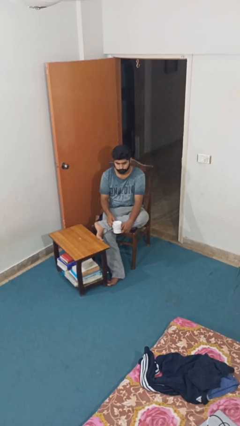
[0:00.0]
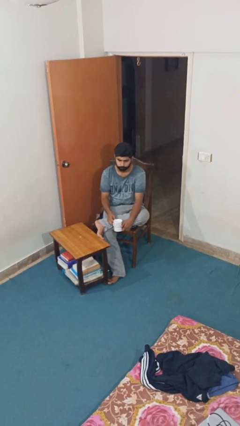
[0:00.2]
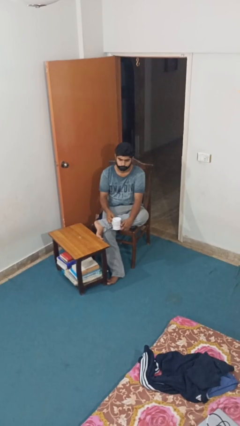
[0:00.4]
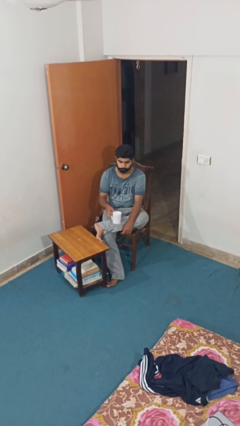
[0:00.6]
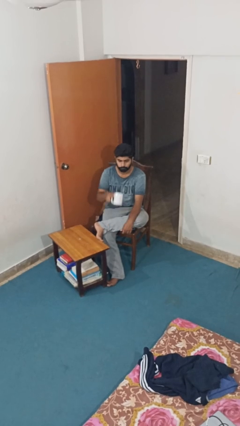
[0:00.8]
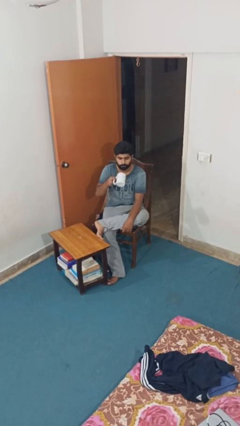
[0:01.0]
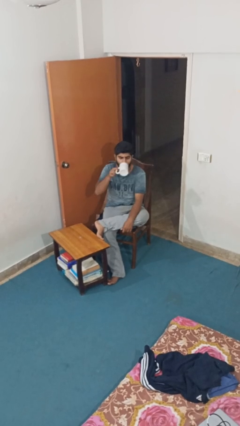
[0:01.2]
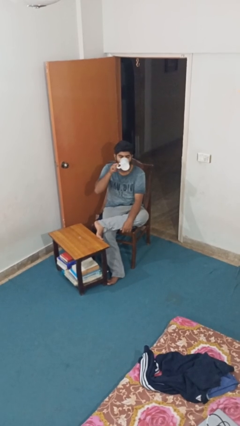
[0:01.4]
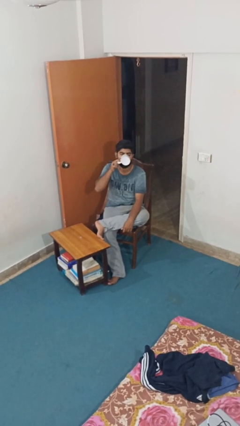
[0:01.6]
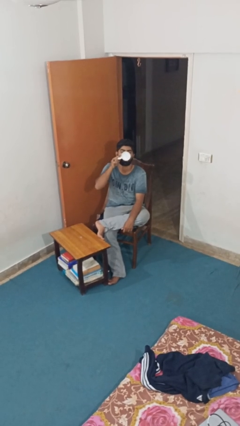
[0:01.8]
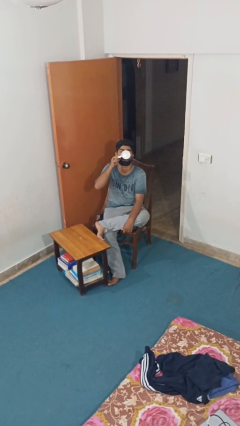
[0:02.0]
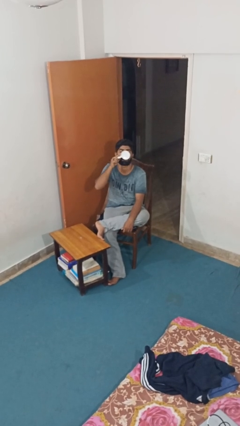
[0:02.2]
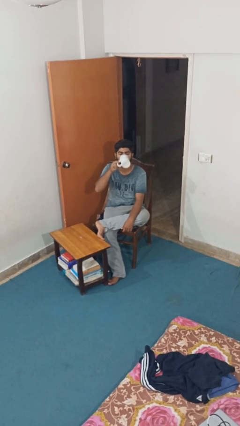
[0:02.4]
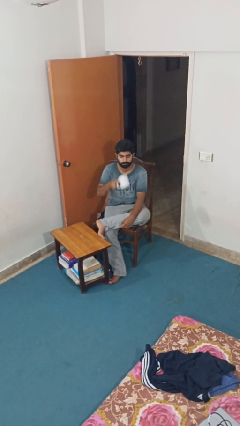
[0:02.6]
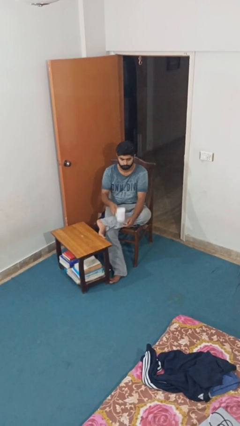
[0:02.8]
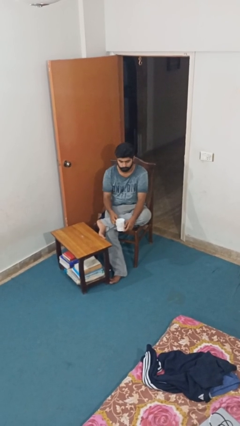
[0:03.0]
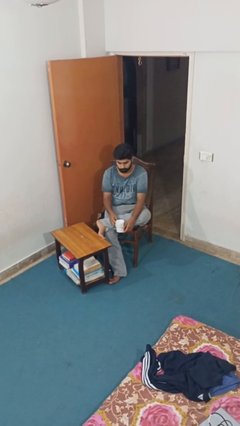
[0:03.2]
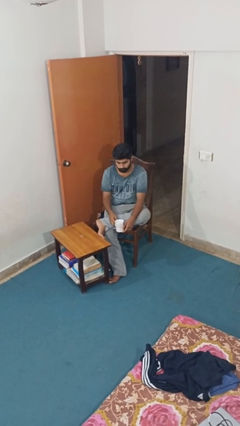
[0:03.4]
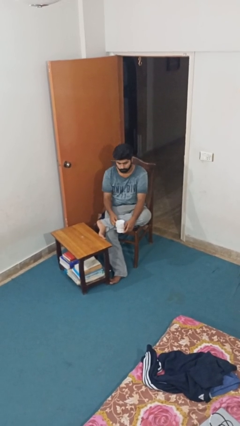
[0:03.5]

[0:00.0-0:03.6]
person drinks from mug

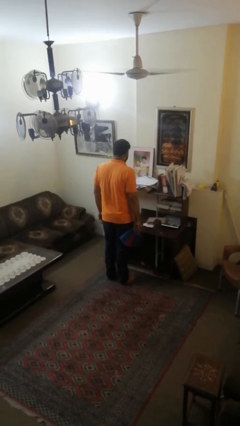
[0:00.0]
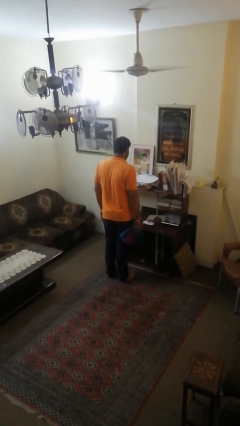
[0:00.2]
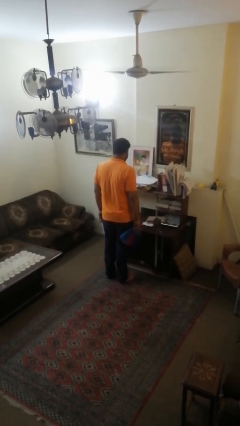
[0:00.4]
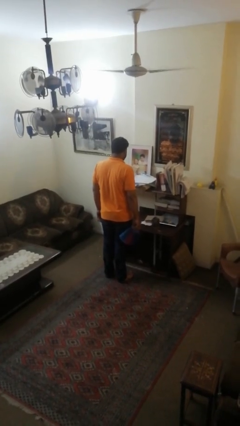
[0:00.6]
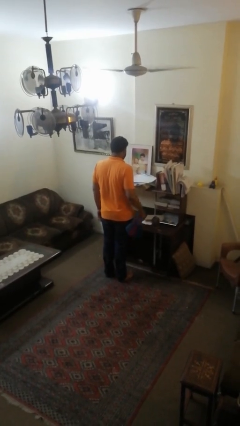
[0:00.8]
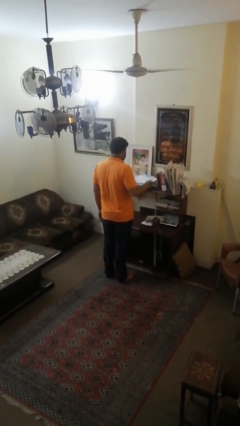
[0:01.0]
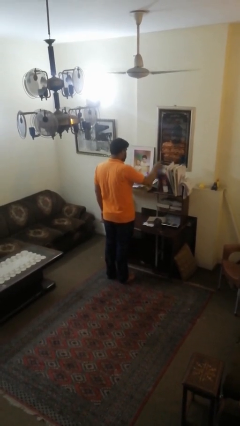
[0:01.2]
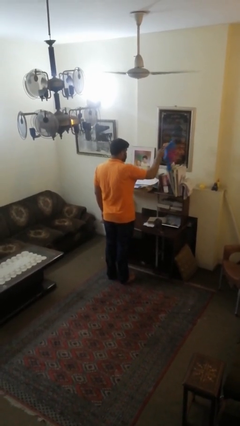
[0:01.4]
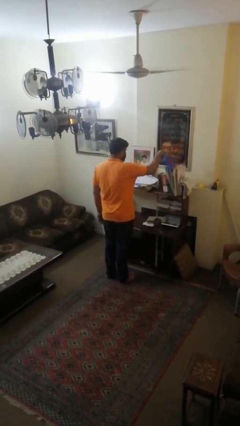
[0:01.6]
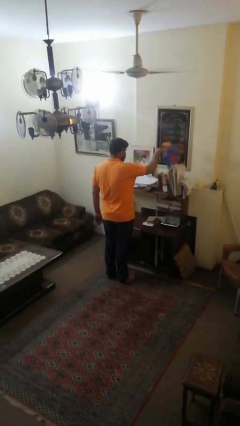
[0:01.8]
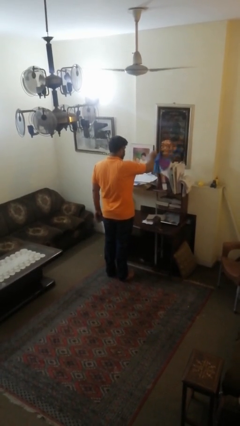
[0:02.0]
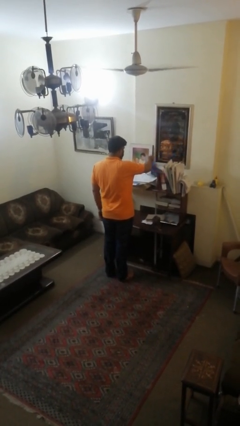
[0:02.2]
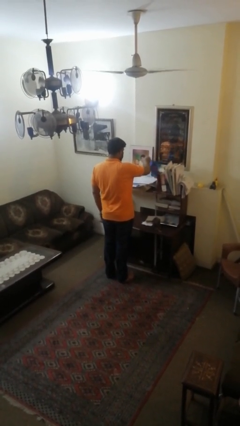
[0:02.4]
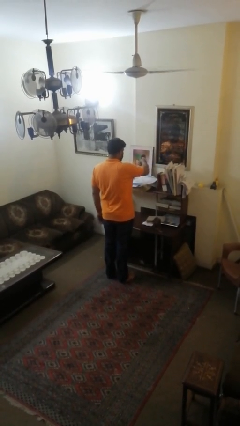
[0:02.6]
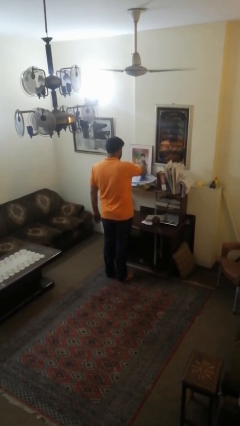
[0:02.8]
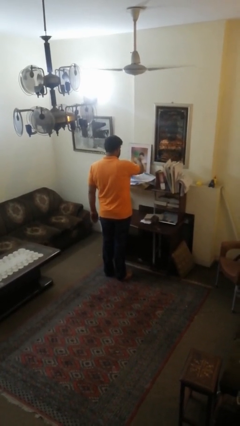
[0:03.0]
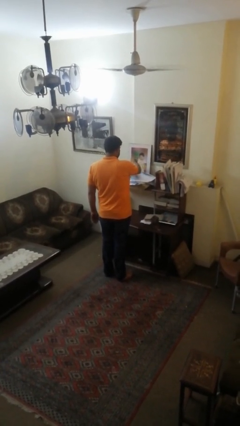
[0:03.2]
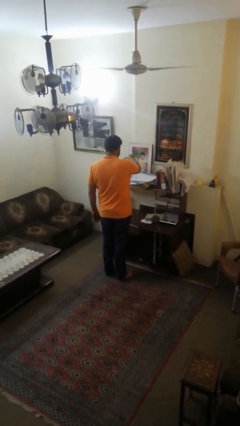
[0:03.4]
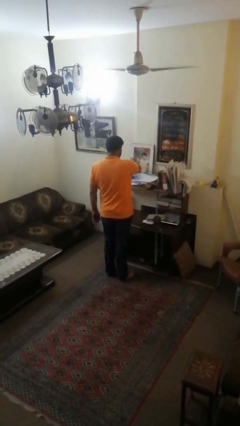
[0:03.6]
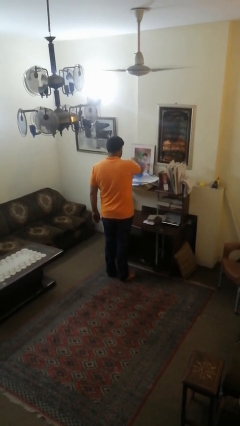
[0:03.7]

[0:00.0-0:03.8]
person dusts furniture

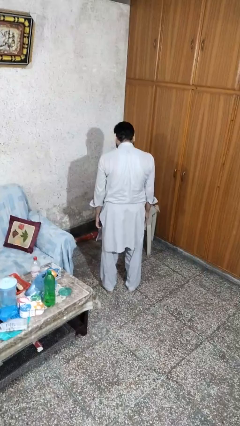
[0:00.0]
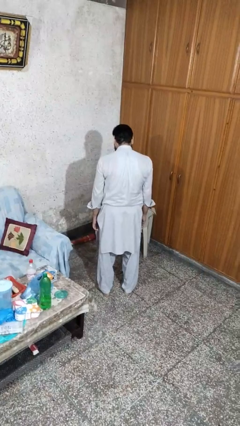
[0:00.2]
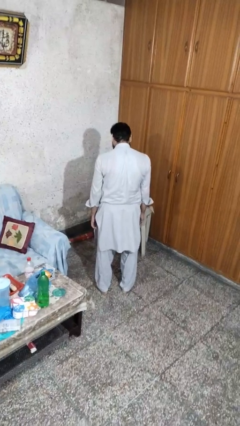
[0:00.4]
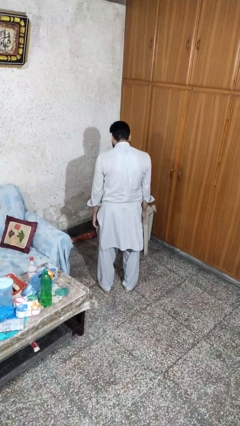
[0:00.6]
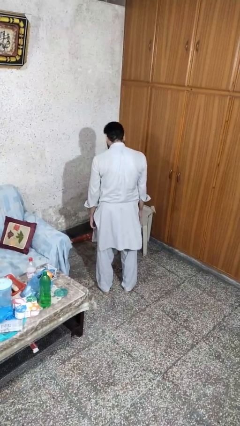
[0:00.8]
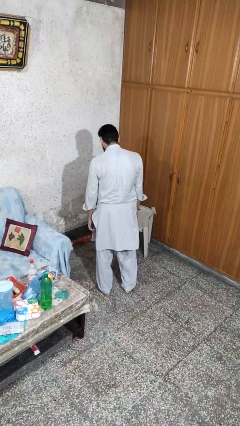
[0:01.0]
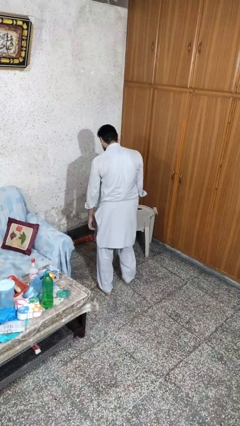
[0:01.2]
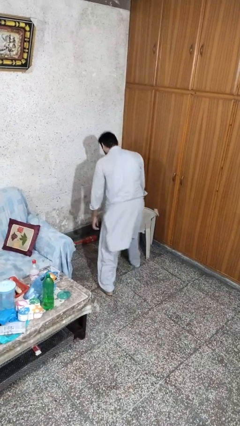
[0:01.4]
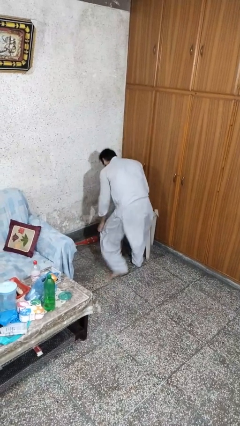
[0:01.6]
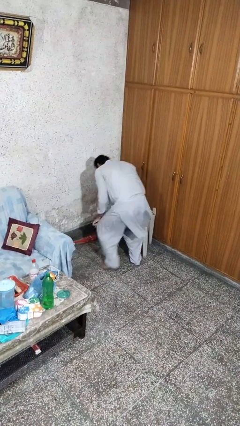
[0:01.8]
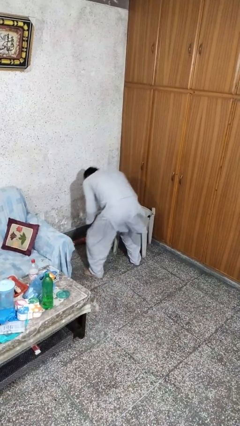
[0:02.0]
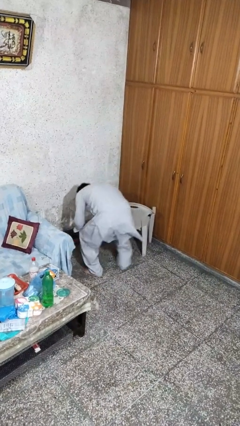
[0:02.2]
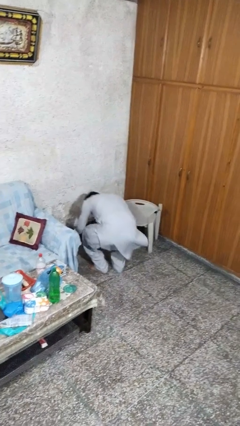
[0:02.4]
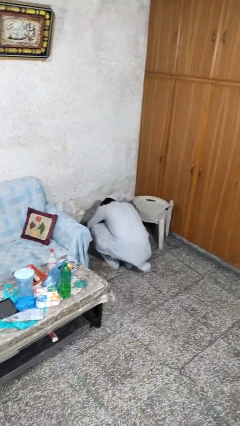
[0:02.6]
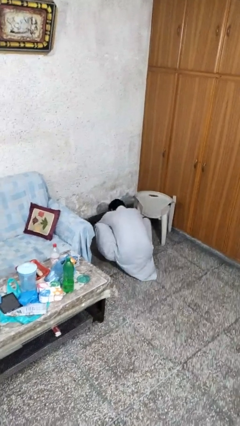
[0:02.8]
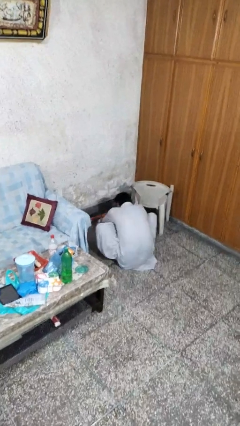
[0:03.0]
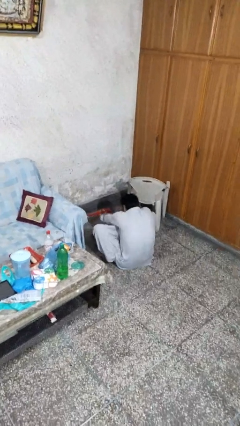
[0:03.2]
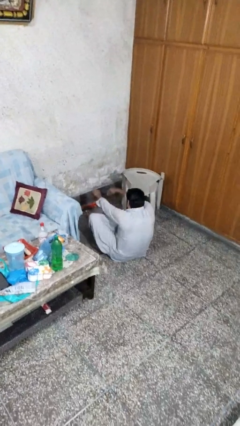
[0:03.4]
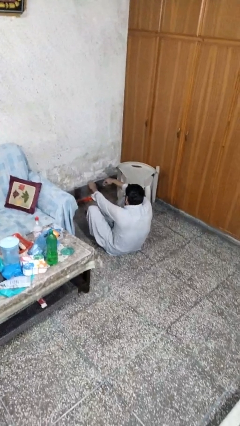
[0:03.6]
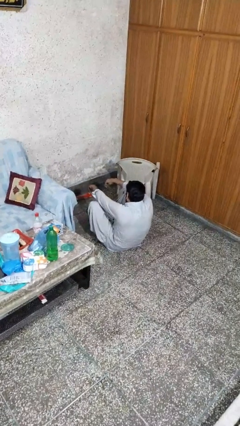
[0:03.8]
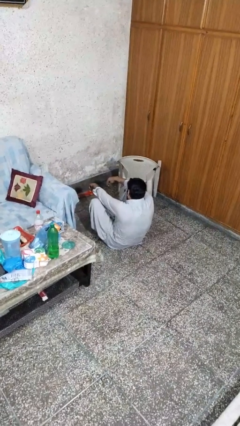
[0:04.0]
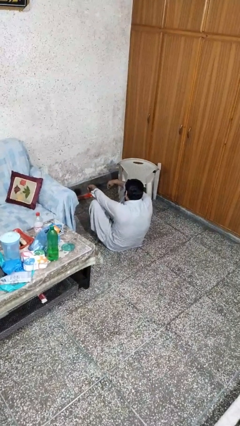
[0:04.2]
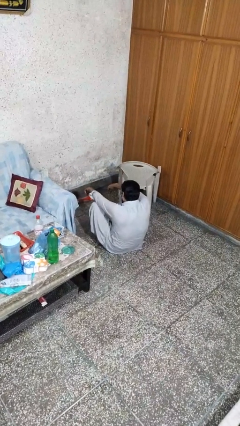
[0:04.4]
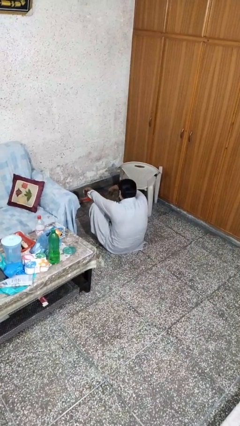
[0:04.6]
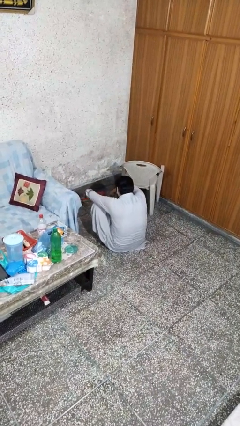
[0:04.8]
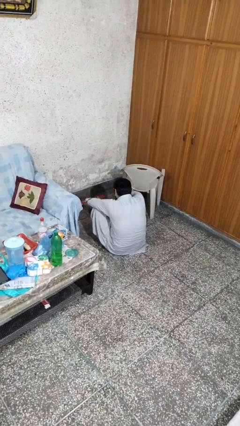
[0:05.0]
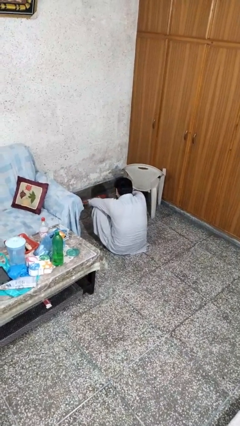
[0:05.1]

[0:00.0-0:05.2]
person trips on object on floor

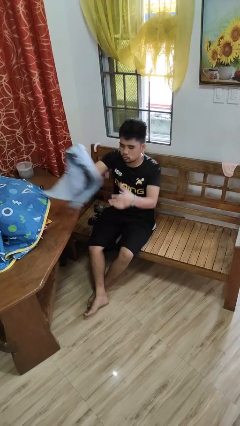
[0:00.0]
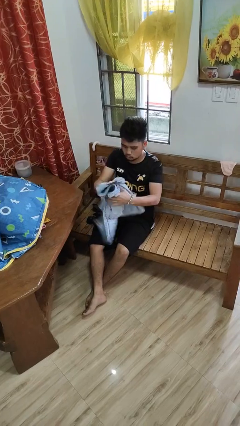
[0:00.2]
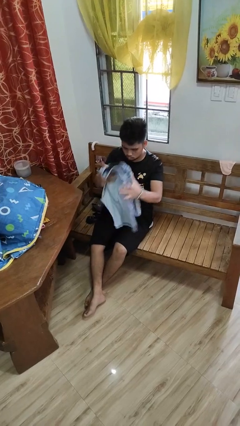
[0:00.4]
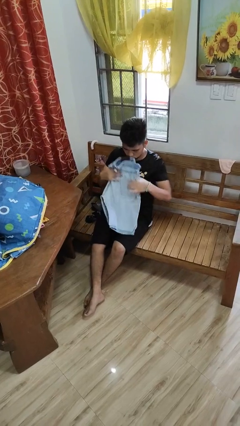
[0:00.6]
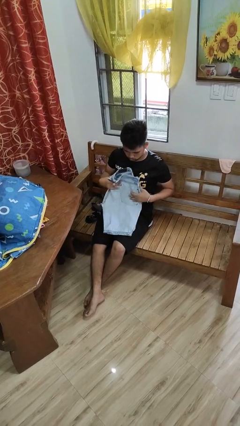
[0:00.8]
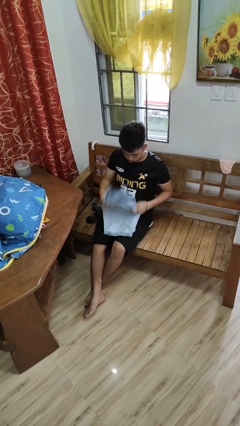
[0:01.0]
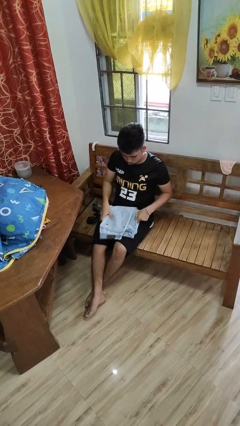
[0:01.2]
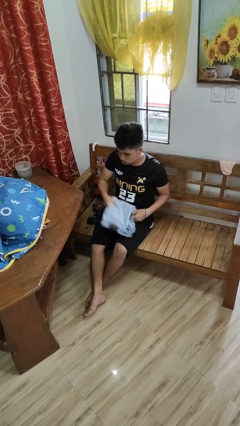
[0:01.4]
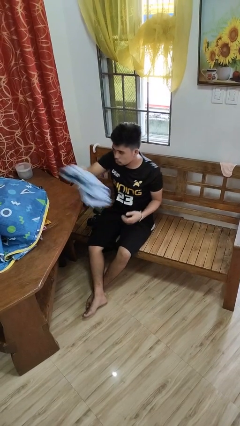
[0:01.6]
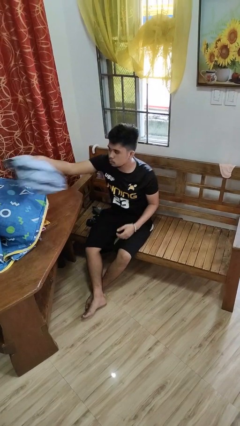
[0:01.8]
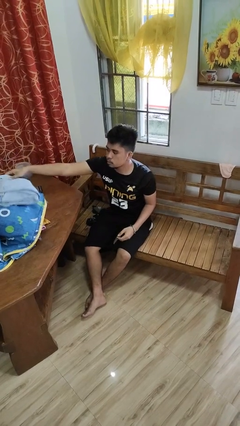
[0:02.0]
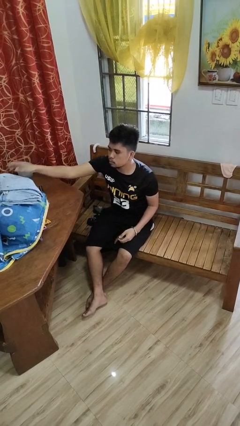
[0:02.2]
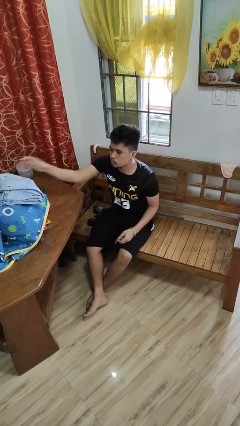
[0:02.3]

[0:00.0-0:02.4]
person folds pants

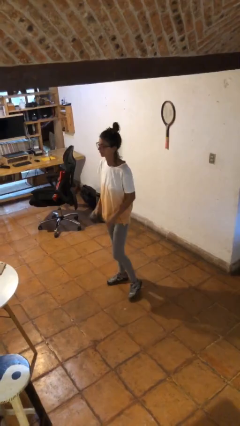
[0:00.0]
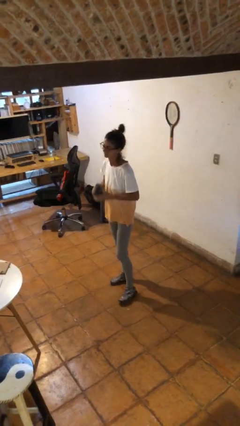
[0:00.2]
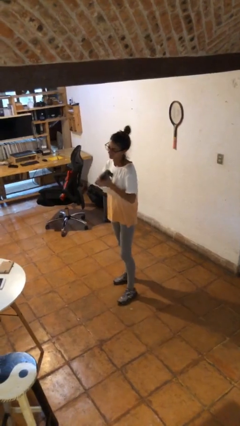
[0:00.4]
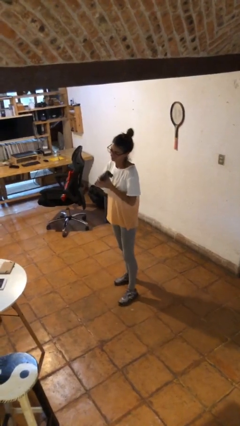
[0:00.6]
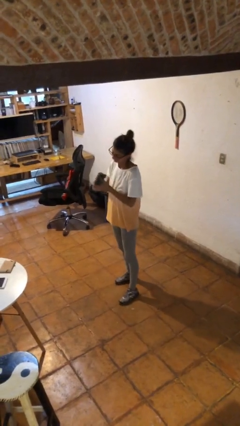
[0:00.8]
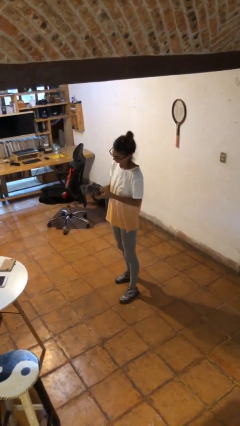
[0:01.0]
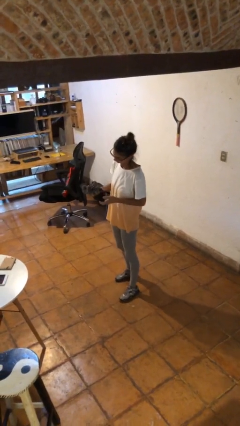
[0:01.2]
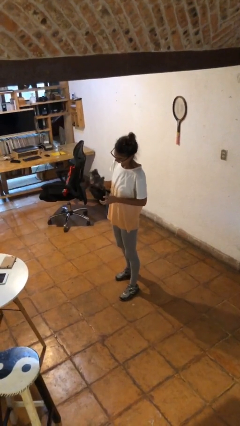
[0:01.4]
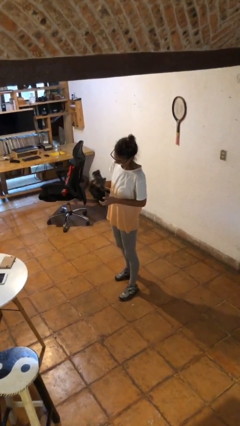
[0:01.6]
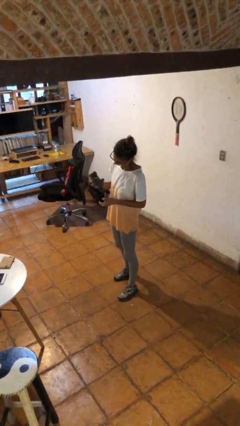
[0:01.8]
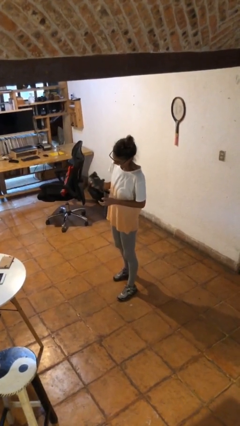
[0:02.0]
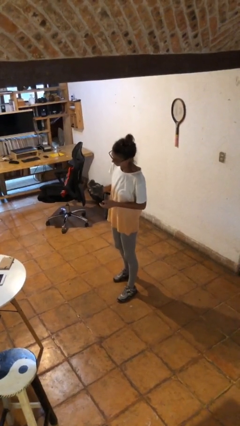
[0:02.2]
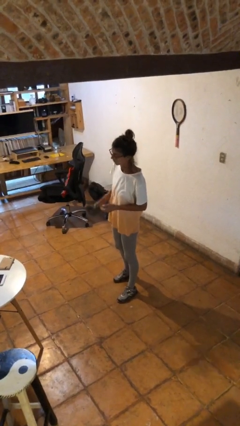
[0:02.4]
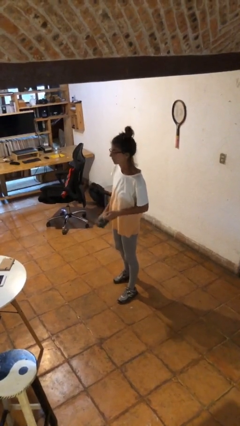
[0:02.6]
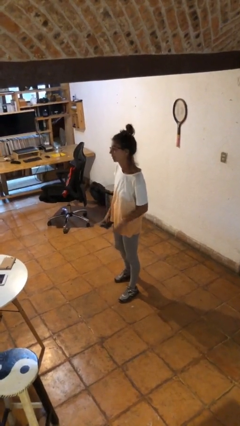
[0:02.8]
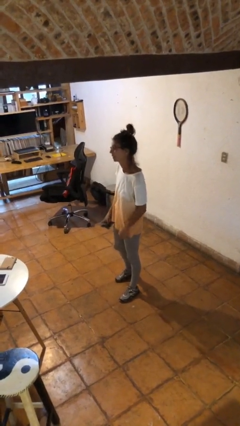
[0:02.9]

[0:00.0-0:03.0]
person squeezes object
